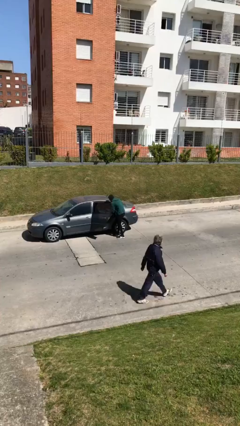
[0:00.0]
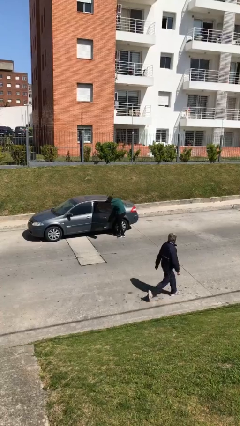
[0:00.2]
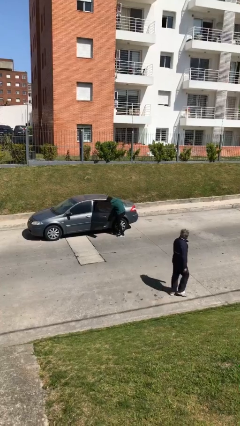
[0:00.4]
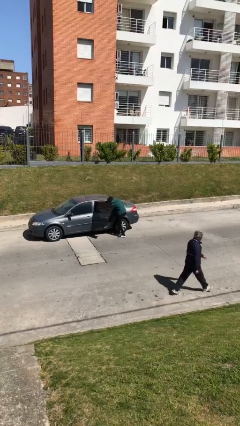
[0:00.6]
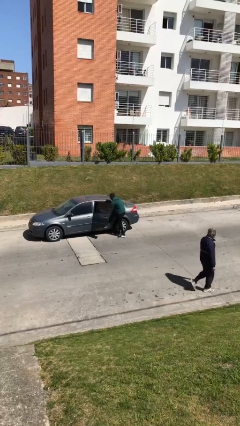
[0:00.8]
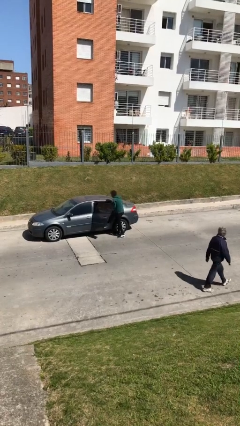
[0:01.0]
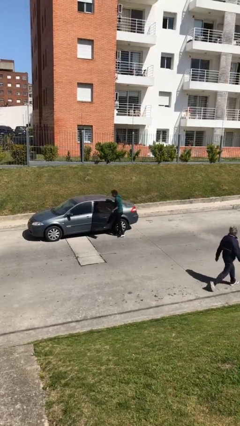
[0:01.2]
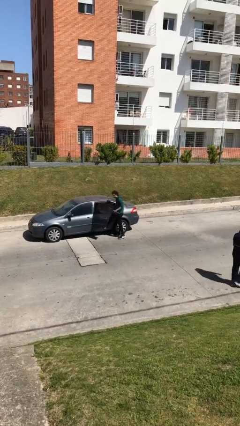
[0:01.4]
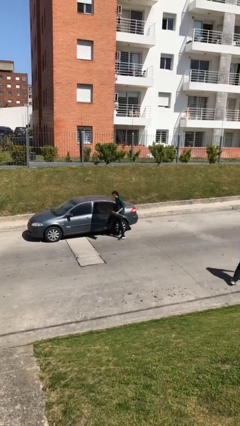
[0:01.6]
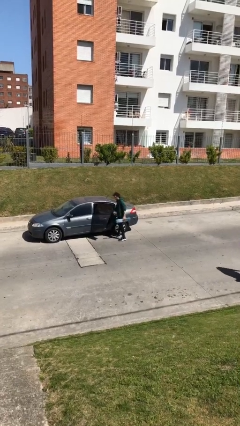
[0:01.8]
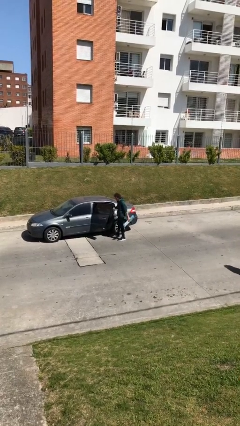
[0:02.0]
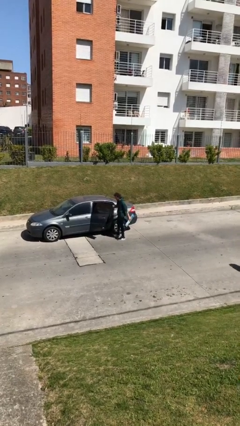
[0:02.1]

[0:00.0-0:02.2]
person unloads car

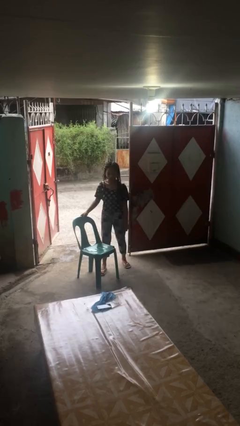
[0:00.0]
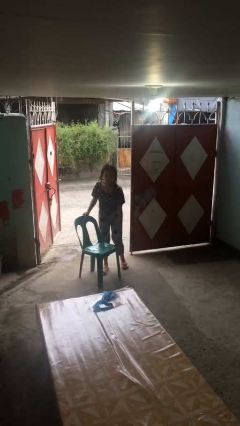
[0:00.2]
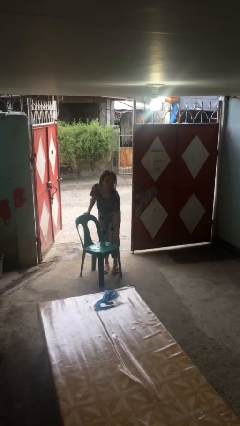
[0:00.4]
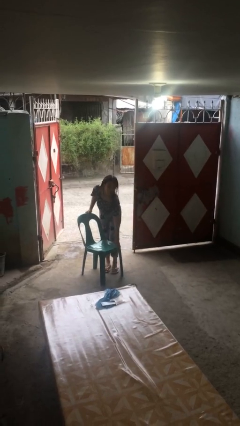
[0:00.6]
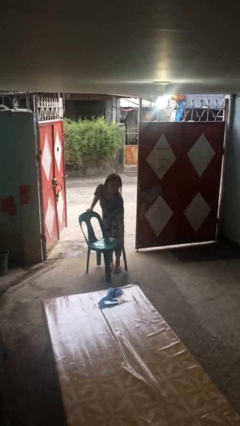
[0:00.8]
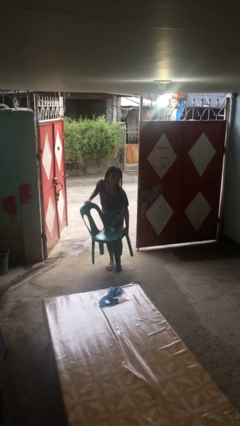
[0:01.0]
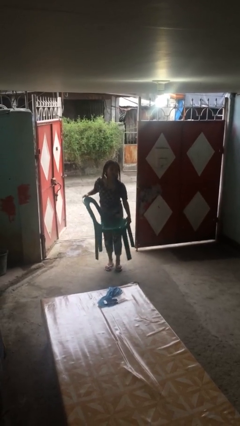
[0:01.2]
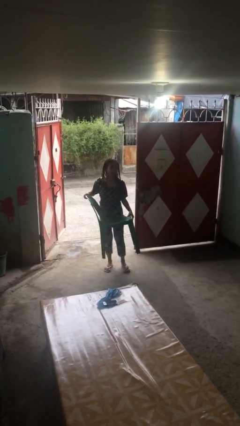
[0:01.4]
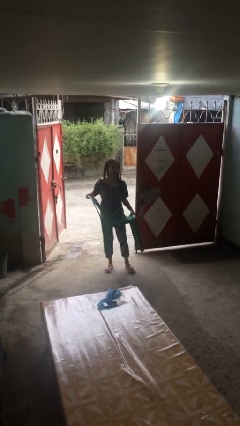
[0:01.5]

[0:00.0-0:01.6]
person picks up object from floor

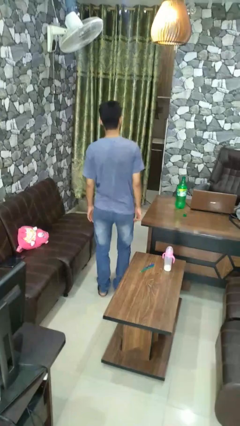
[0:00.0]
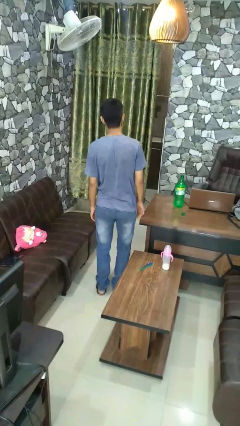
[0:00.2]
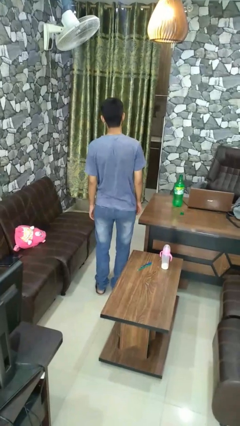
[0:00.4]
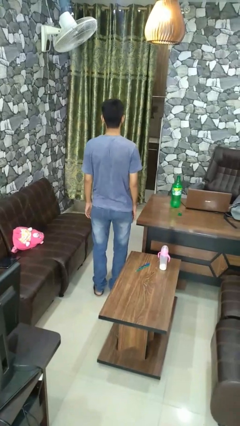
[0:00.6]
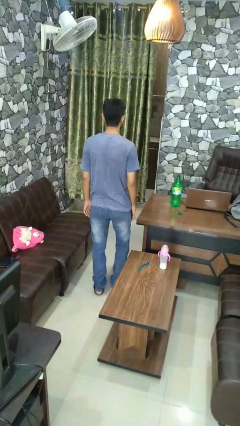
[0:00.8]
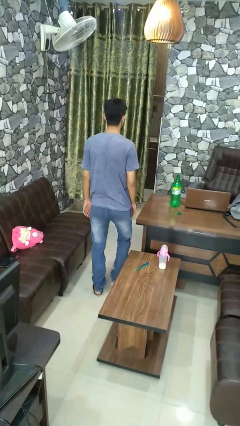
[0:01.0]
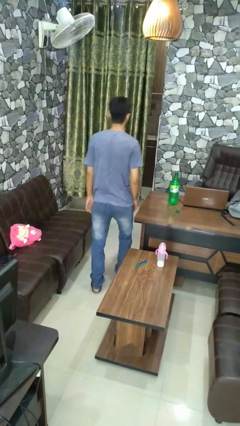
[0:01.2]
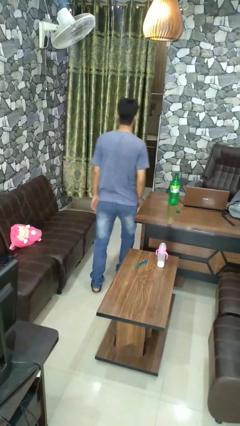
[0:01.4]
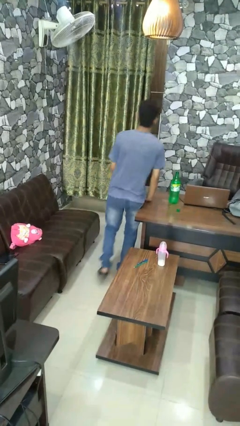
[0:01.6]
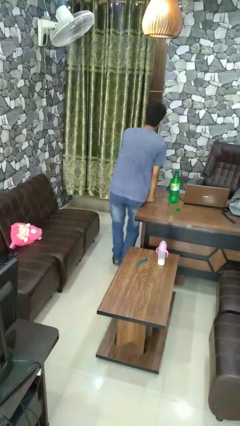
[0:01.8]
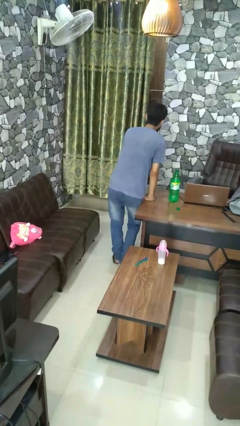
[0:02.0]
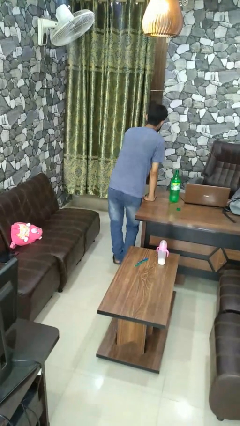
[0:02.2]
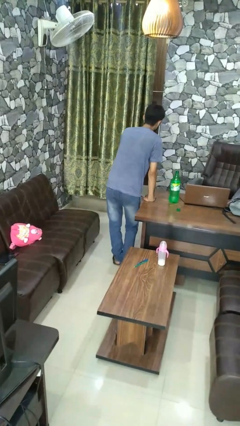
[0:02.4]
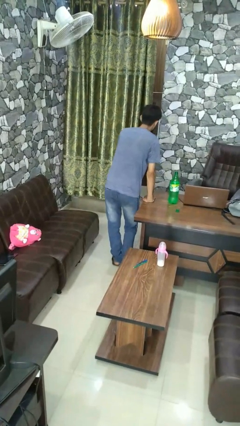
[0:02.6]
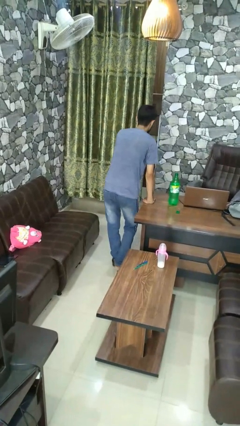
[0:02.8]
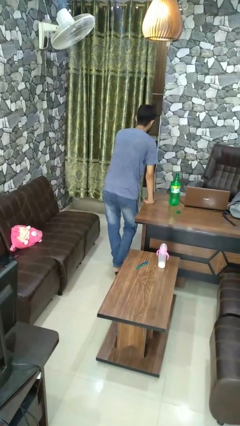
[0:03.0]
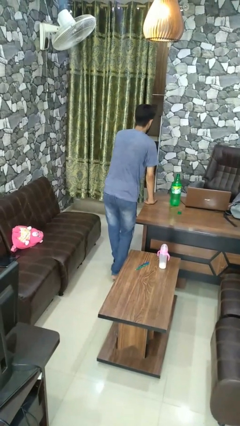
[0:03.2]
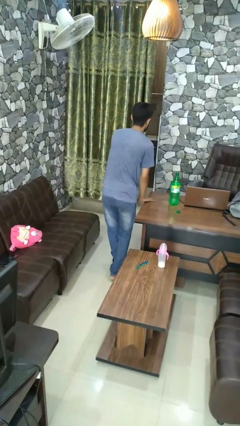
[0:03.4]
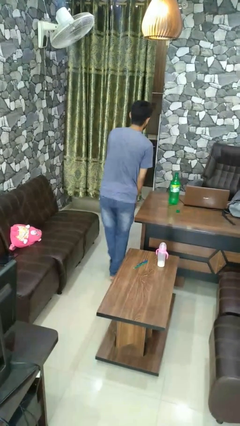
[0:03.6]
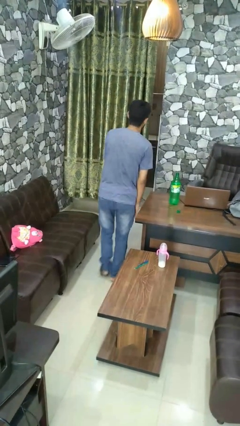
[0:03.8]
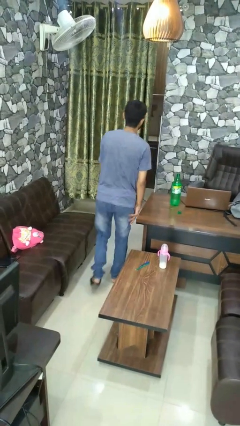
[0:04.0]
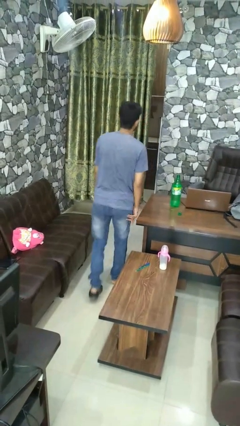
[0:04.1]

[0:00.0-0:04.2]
person bumps into table

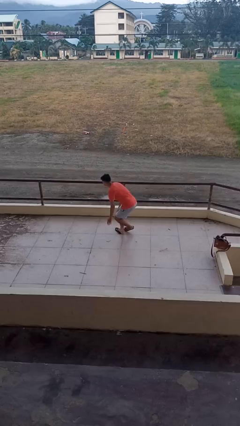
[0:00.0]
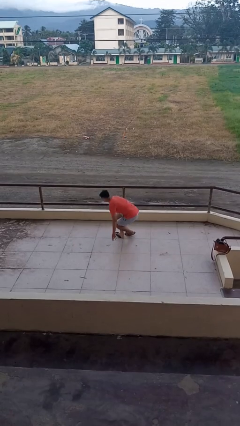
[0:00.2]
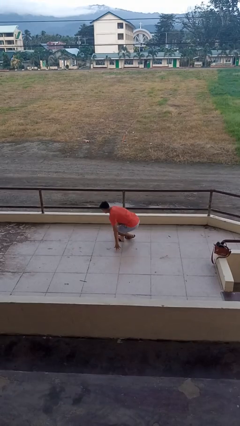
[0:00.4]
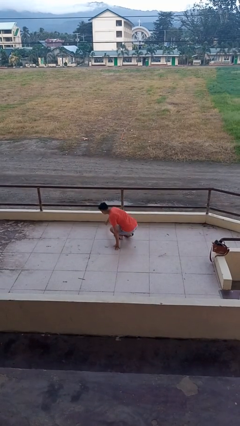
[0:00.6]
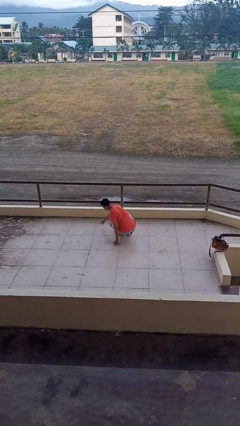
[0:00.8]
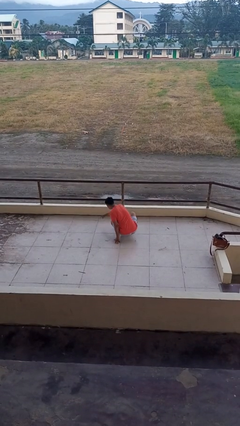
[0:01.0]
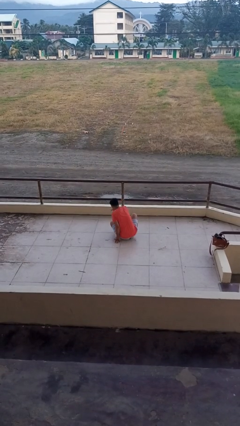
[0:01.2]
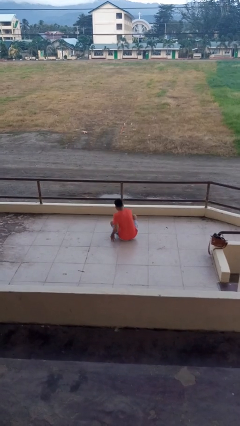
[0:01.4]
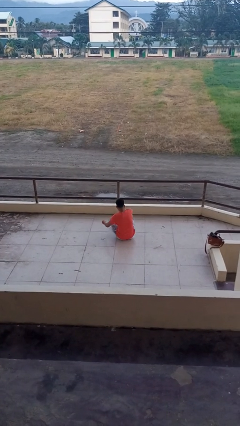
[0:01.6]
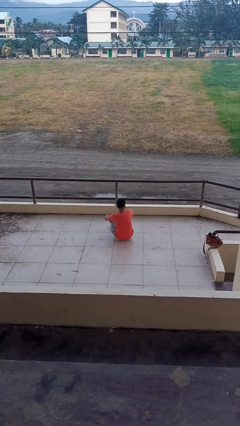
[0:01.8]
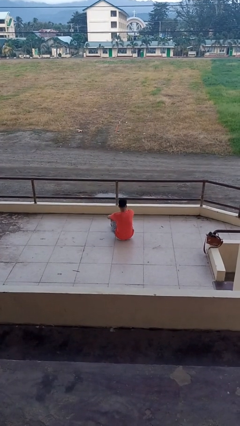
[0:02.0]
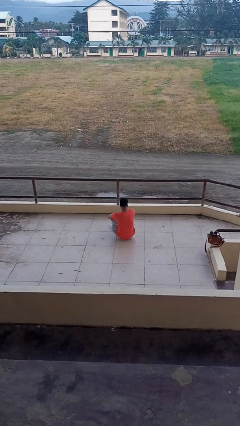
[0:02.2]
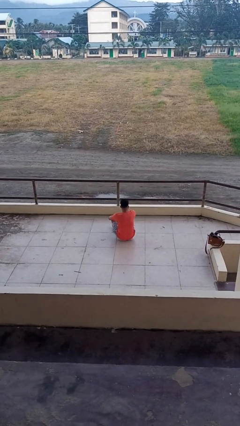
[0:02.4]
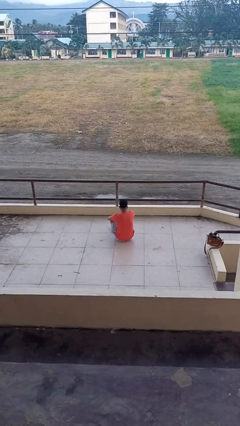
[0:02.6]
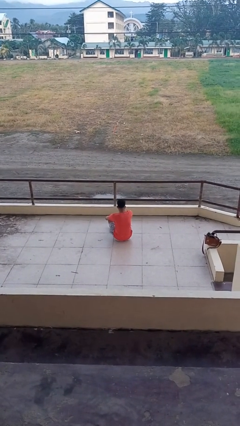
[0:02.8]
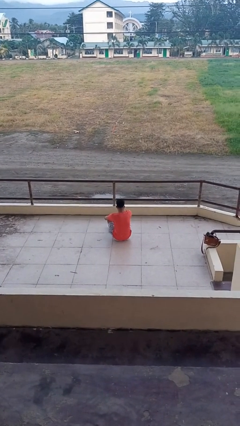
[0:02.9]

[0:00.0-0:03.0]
person sits crisscross

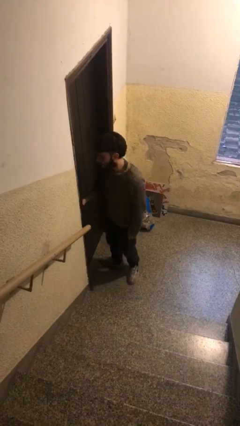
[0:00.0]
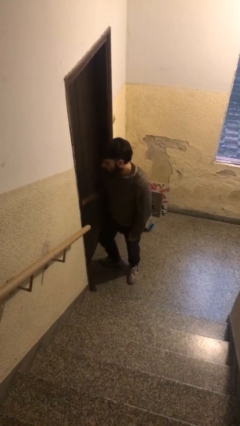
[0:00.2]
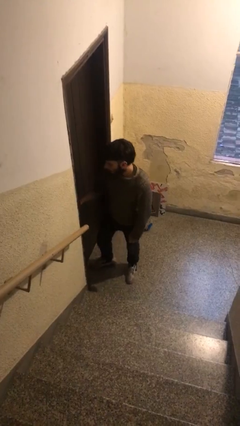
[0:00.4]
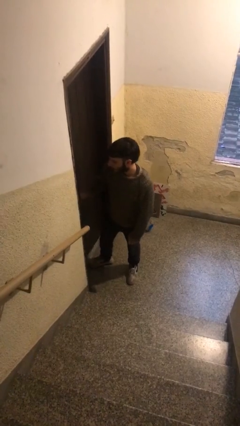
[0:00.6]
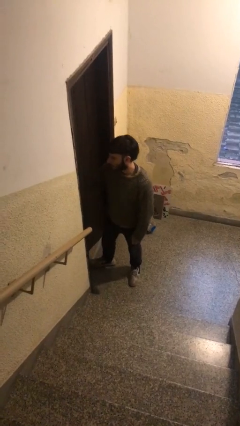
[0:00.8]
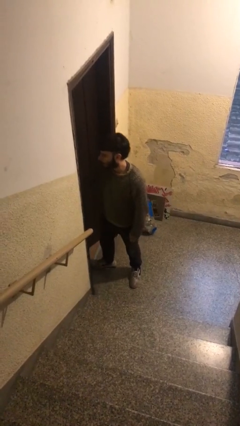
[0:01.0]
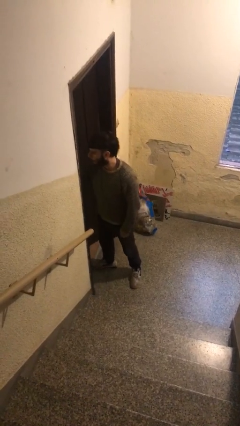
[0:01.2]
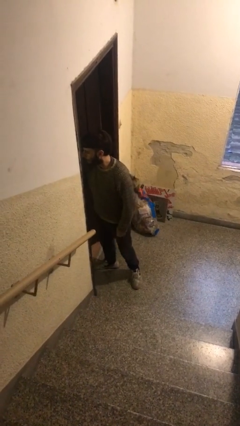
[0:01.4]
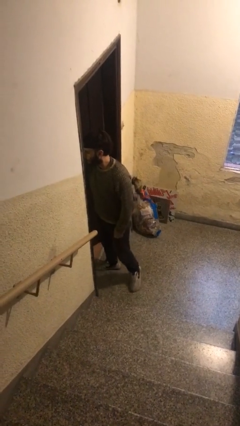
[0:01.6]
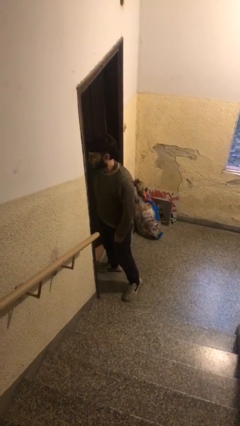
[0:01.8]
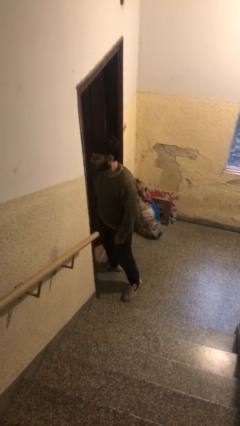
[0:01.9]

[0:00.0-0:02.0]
person opens facility door

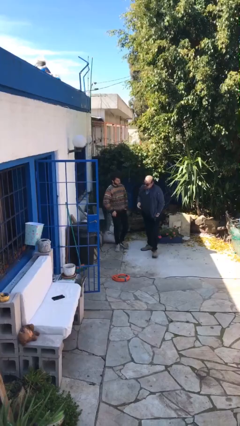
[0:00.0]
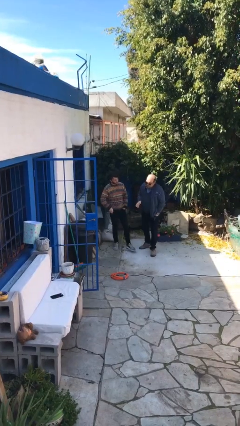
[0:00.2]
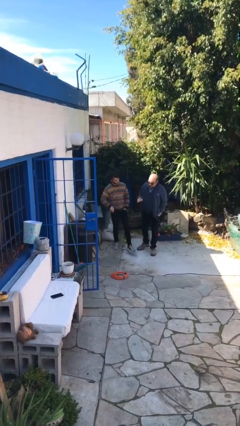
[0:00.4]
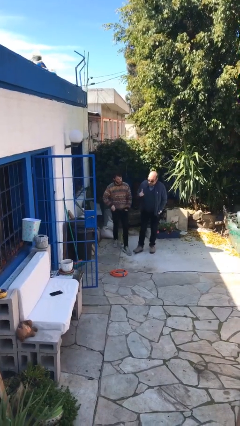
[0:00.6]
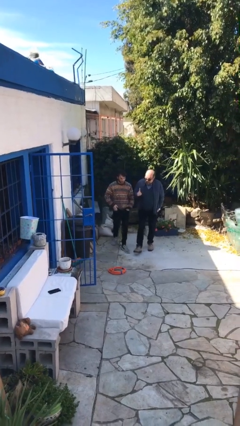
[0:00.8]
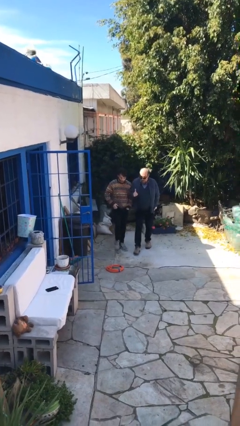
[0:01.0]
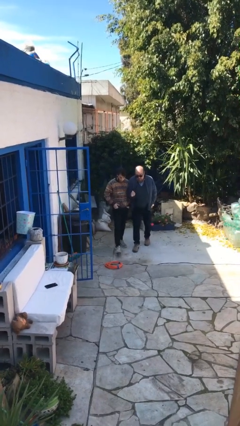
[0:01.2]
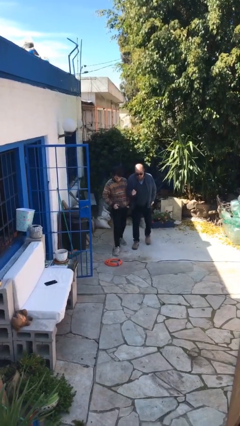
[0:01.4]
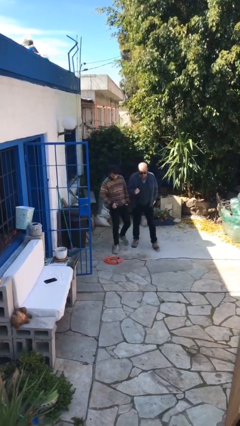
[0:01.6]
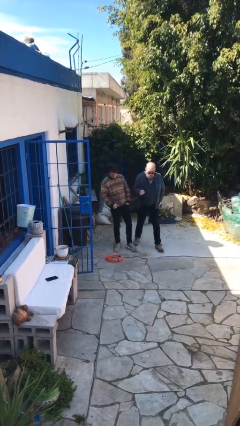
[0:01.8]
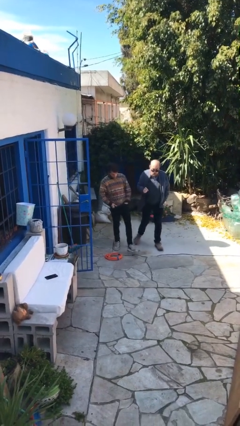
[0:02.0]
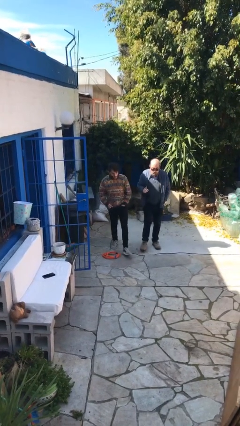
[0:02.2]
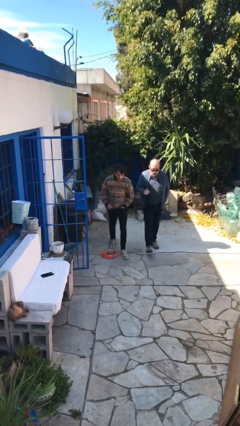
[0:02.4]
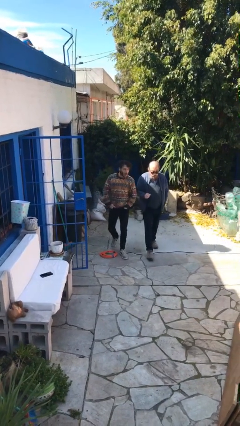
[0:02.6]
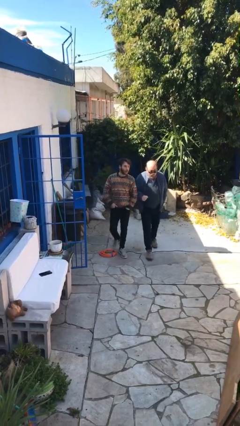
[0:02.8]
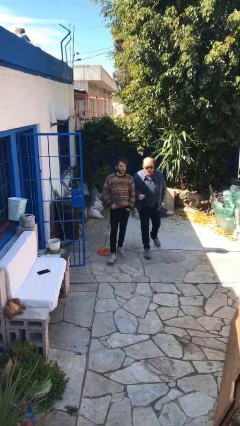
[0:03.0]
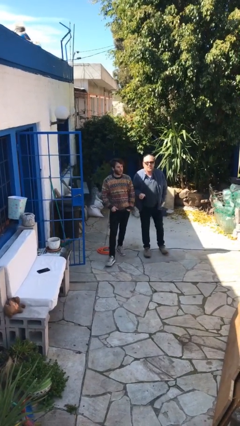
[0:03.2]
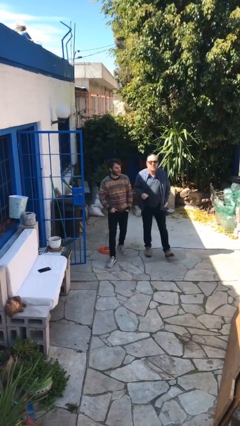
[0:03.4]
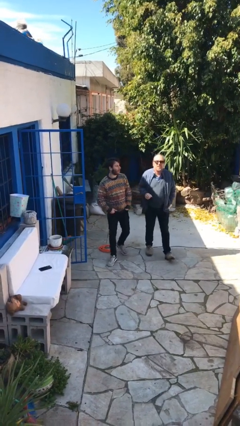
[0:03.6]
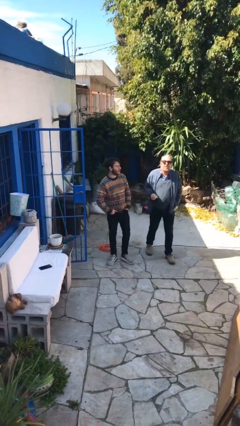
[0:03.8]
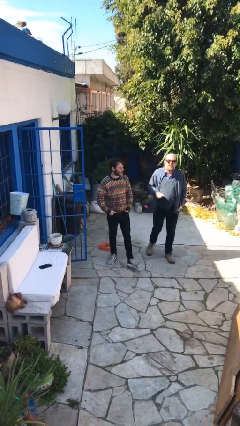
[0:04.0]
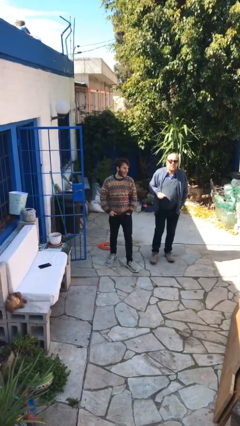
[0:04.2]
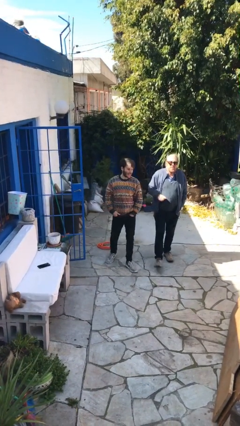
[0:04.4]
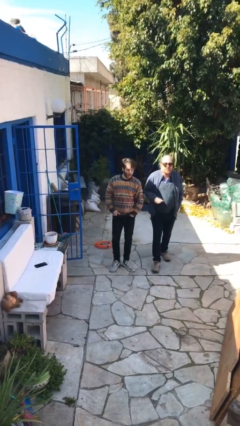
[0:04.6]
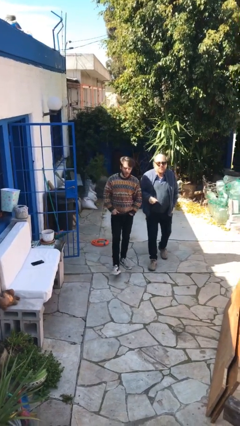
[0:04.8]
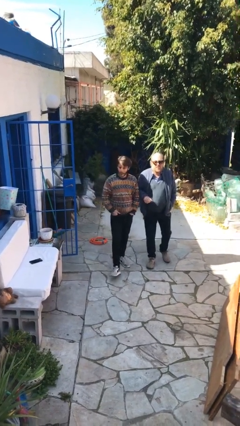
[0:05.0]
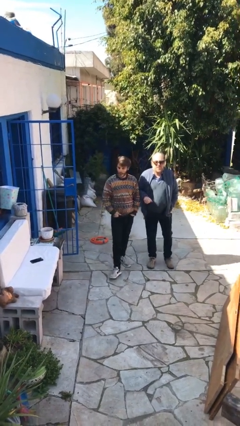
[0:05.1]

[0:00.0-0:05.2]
person talks to person
